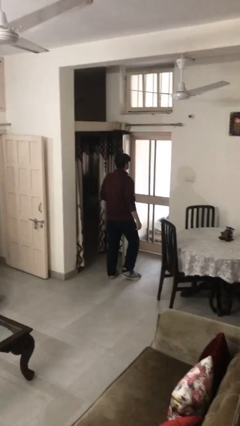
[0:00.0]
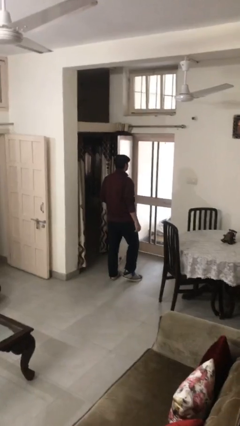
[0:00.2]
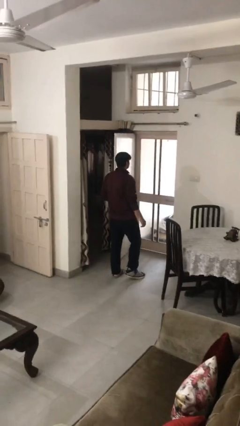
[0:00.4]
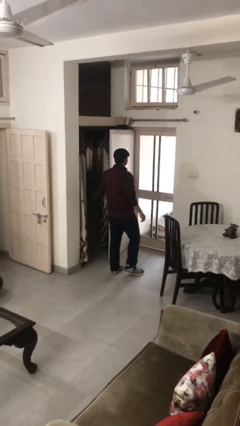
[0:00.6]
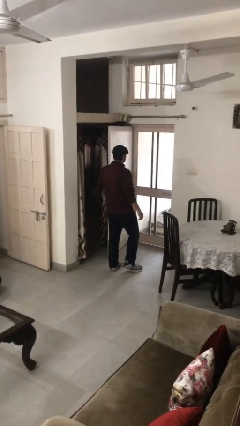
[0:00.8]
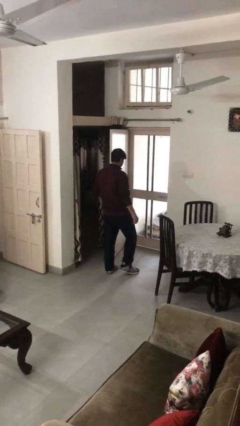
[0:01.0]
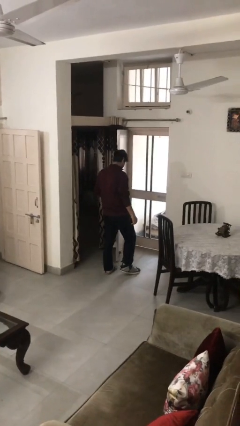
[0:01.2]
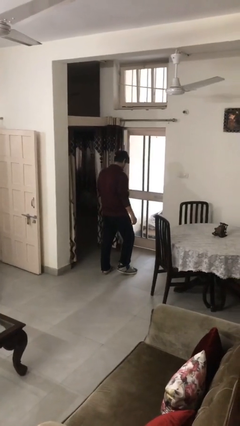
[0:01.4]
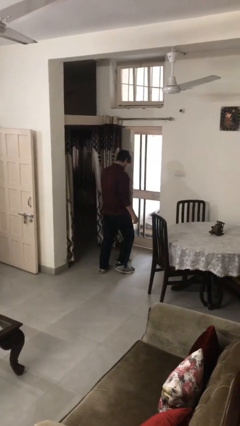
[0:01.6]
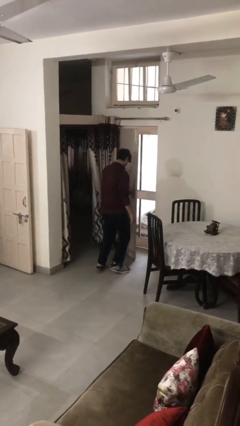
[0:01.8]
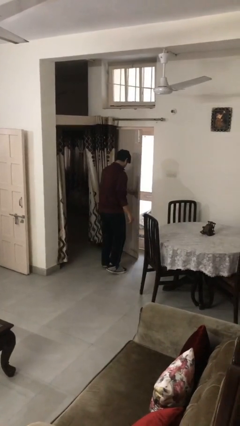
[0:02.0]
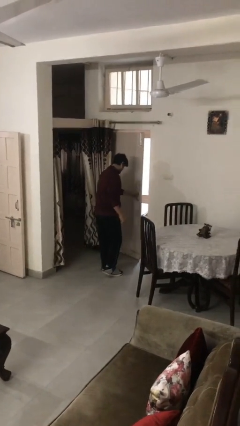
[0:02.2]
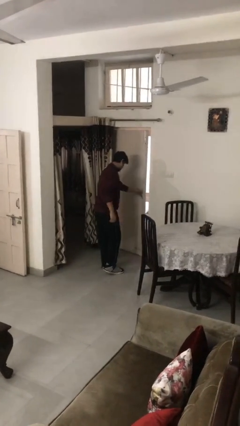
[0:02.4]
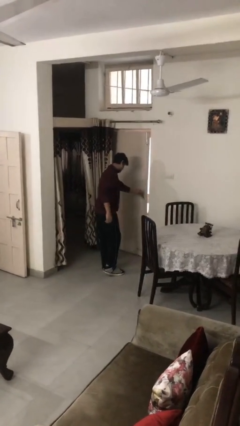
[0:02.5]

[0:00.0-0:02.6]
person closes facility door

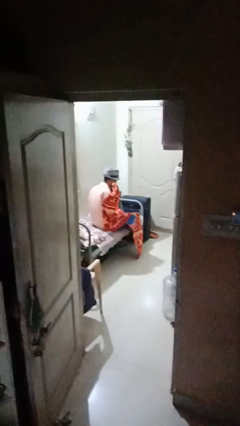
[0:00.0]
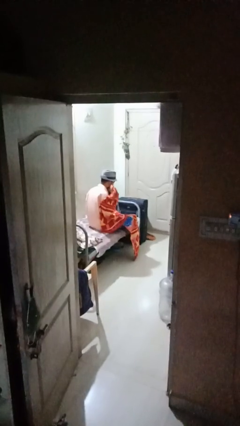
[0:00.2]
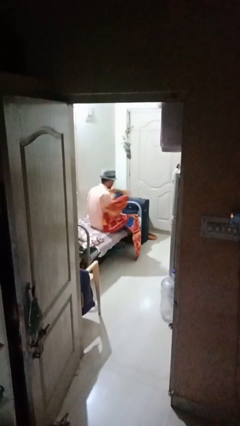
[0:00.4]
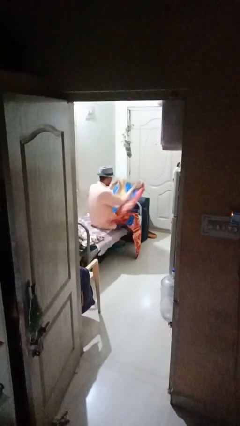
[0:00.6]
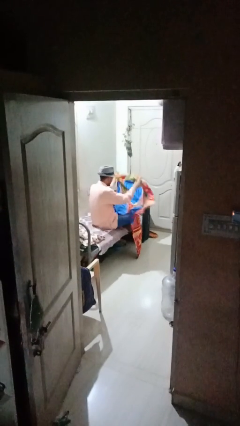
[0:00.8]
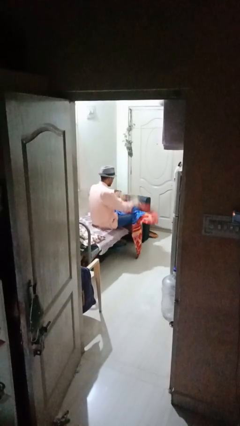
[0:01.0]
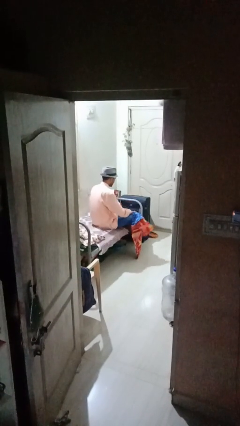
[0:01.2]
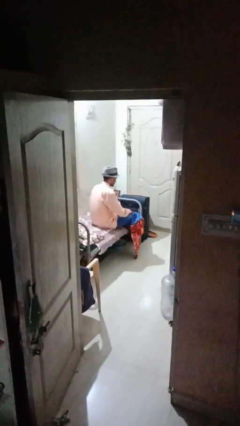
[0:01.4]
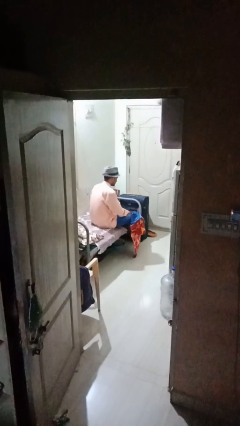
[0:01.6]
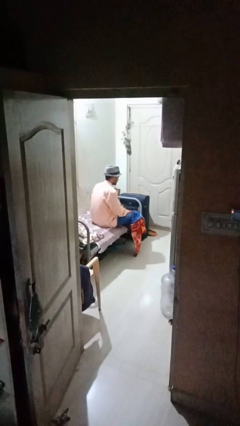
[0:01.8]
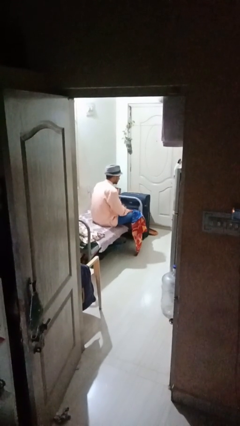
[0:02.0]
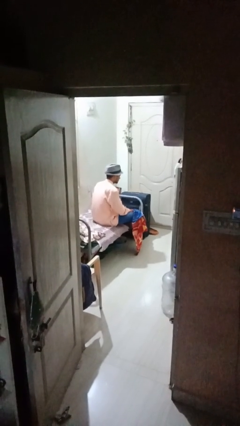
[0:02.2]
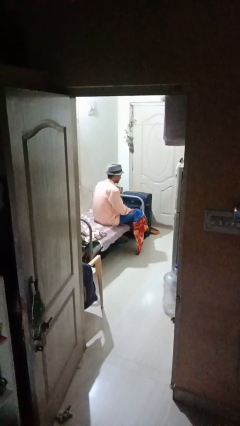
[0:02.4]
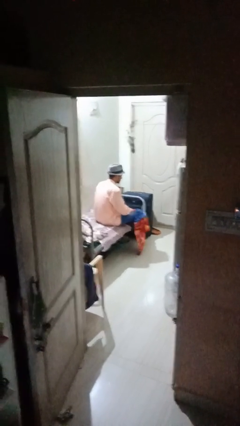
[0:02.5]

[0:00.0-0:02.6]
person uncovers with blanket

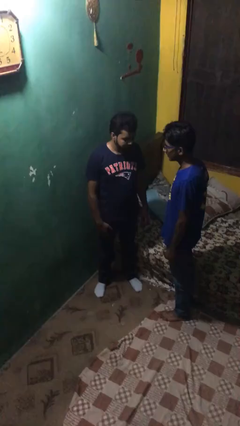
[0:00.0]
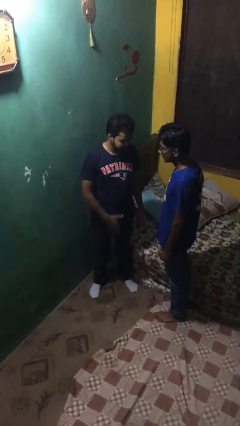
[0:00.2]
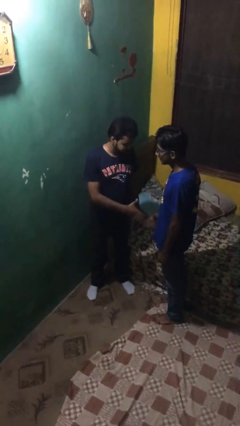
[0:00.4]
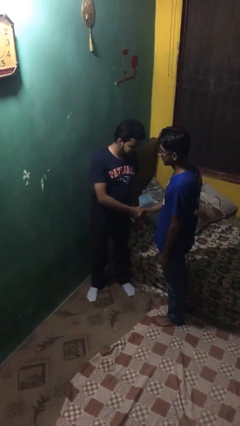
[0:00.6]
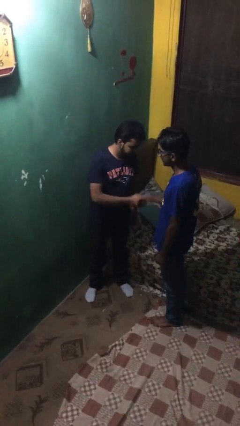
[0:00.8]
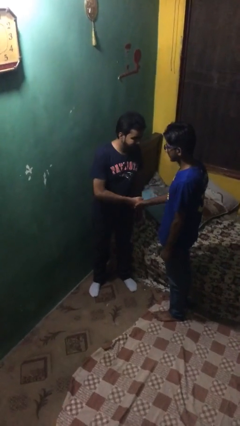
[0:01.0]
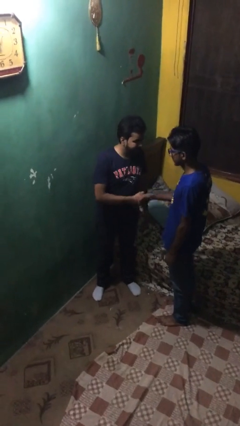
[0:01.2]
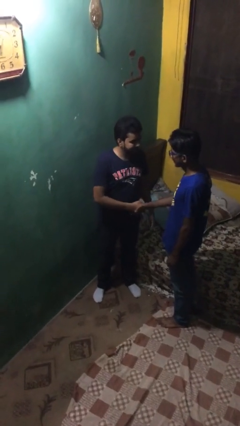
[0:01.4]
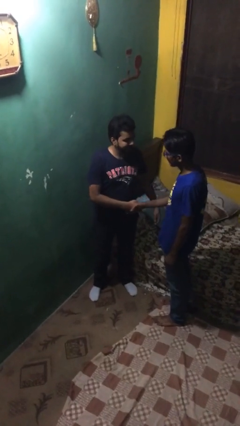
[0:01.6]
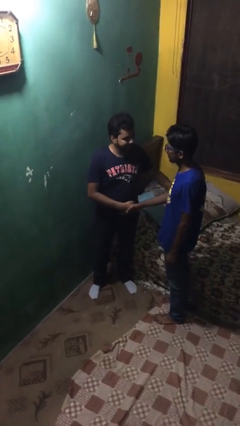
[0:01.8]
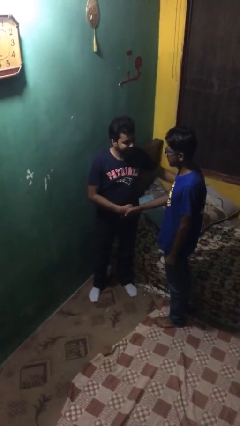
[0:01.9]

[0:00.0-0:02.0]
person shakes hand

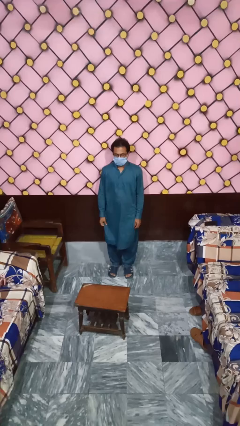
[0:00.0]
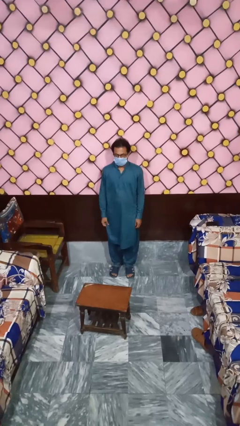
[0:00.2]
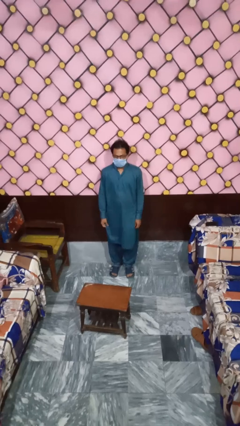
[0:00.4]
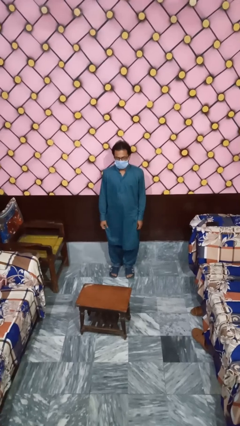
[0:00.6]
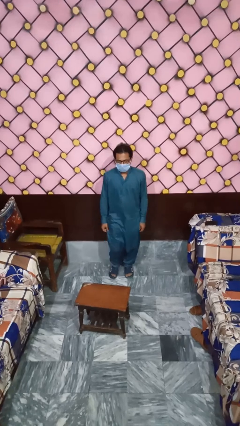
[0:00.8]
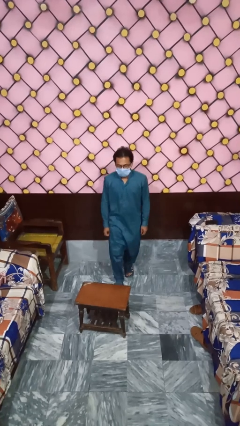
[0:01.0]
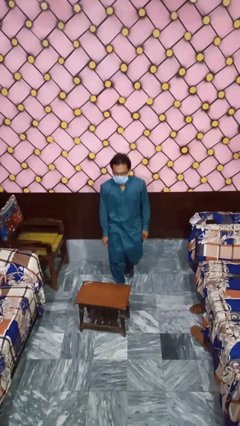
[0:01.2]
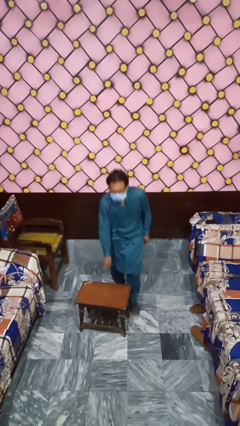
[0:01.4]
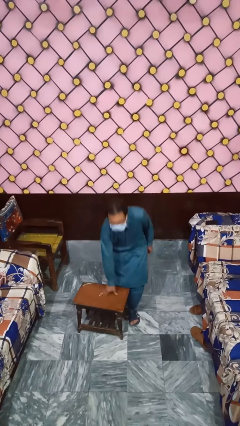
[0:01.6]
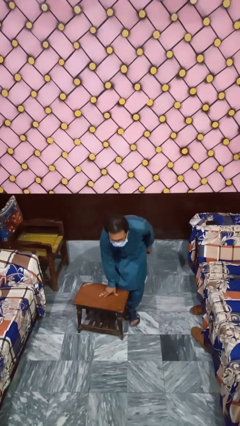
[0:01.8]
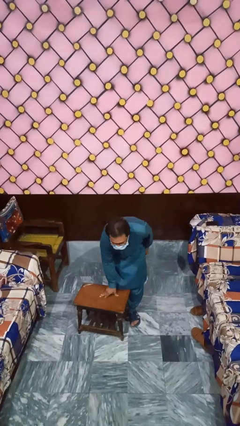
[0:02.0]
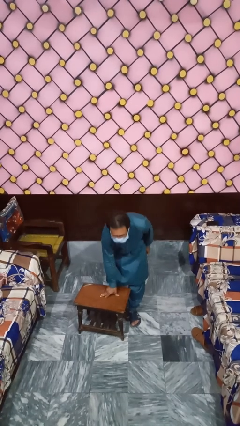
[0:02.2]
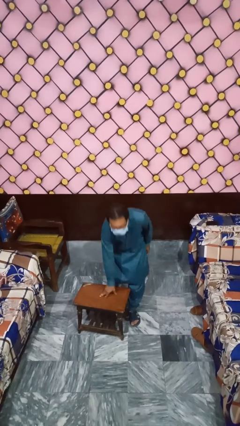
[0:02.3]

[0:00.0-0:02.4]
person bumps into table

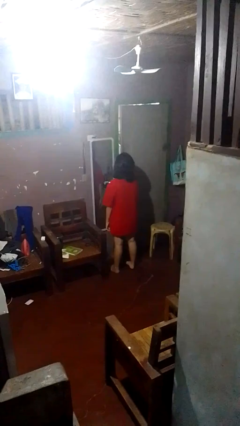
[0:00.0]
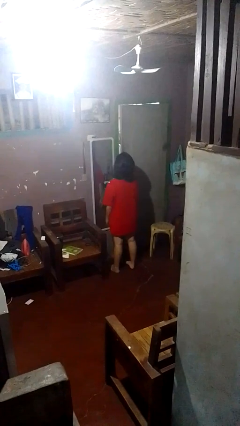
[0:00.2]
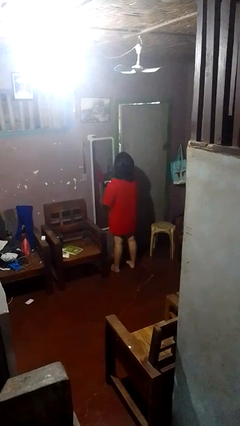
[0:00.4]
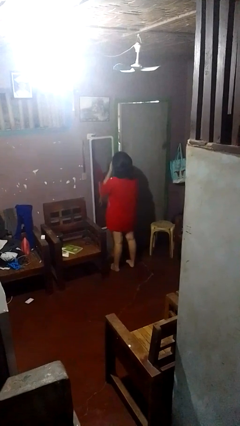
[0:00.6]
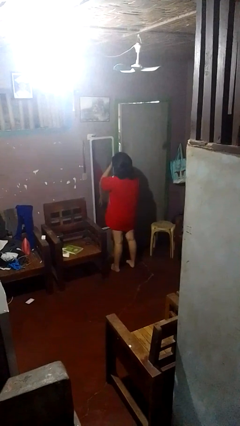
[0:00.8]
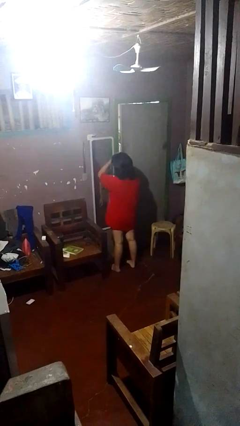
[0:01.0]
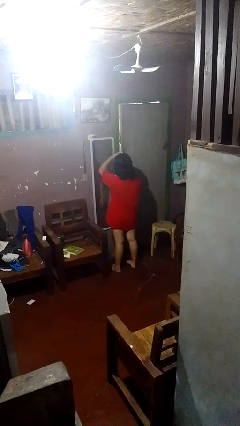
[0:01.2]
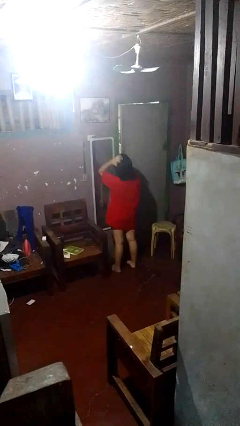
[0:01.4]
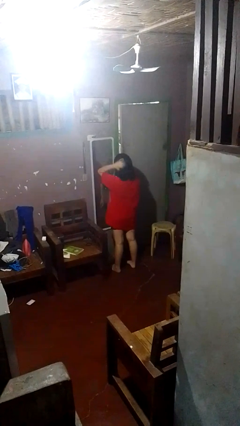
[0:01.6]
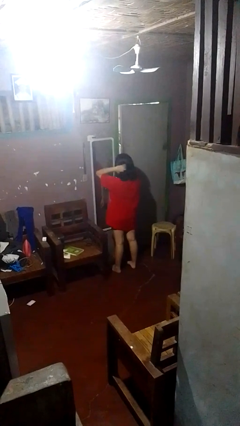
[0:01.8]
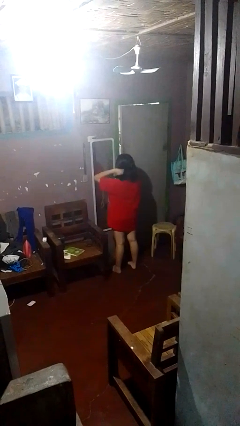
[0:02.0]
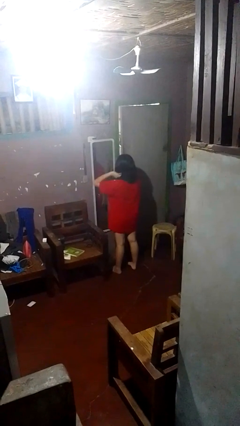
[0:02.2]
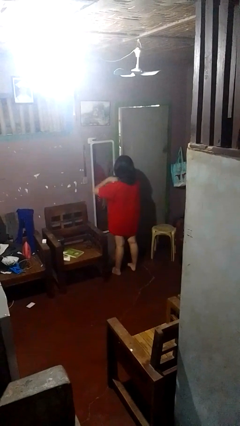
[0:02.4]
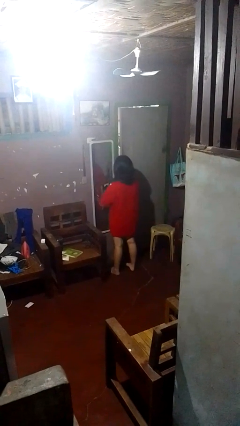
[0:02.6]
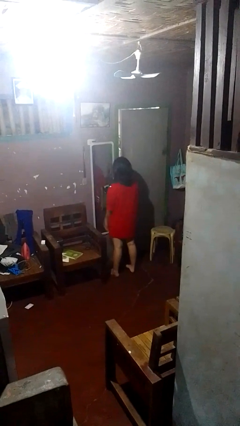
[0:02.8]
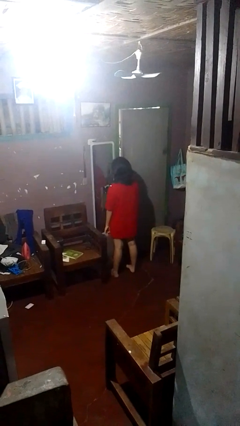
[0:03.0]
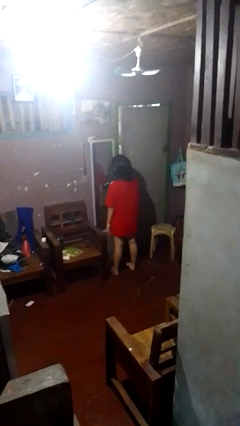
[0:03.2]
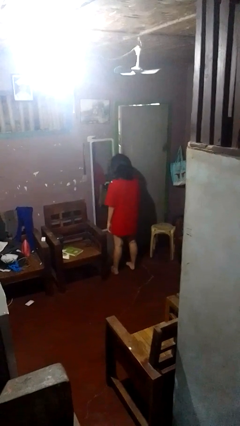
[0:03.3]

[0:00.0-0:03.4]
person strokes hair

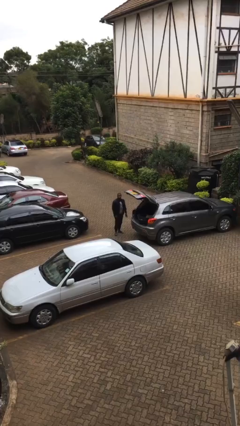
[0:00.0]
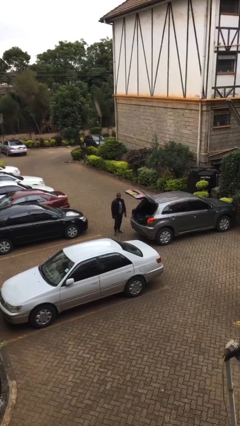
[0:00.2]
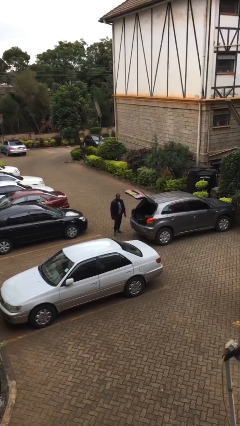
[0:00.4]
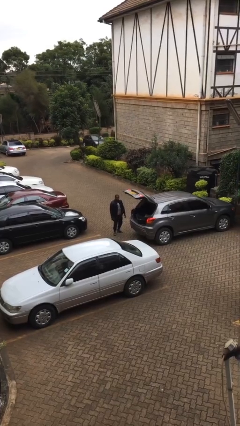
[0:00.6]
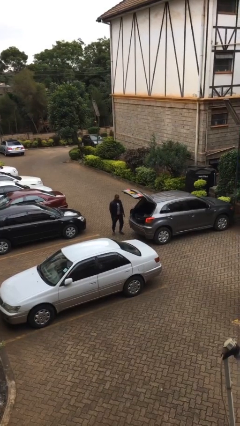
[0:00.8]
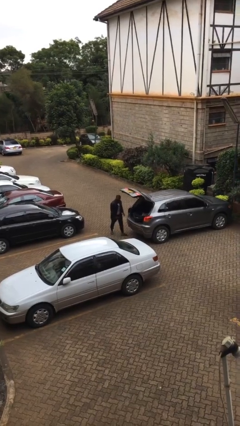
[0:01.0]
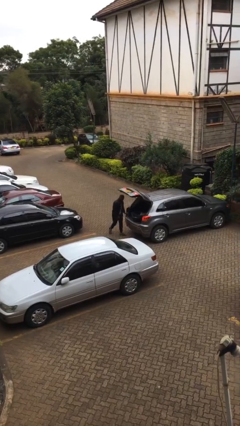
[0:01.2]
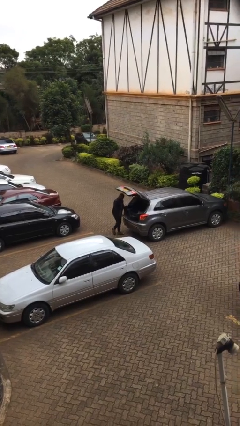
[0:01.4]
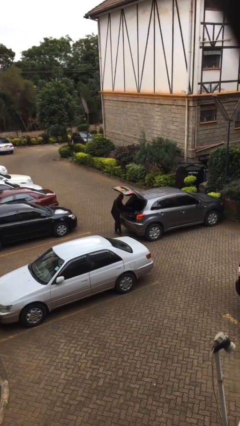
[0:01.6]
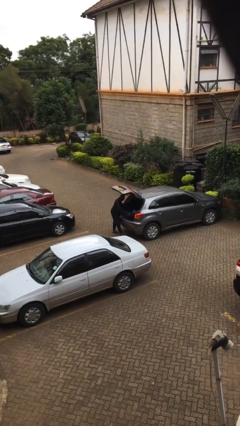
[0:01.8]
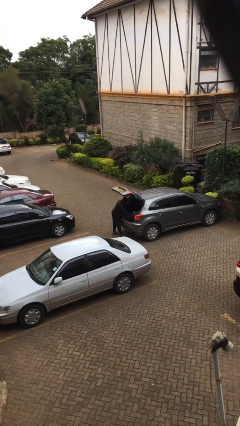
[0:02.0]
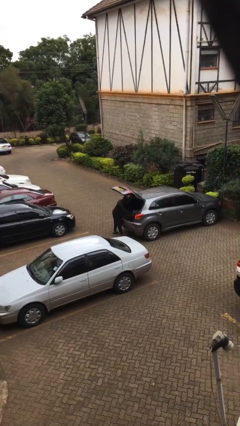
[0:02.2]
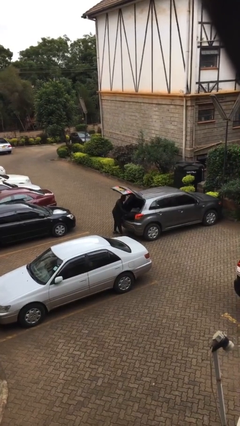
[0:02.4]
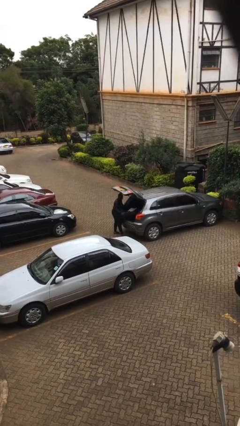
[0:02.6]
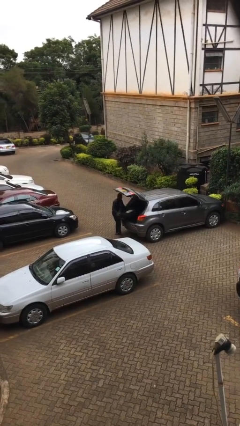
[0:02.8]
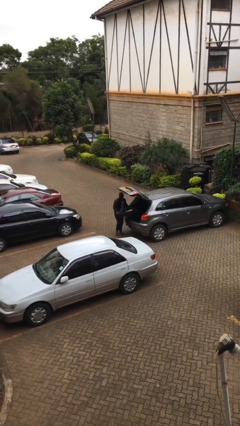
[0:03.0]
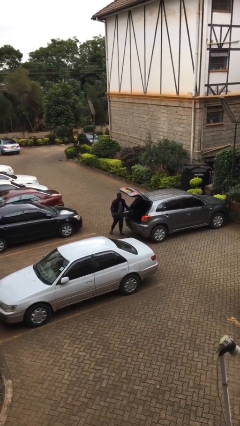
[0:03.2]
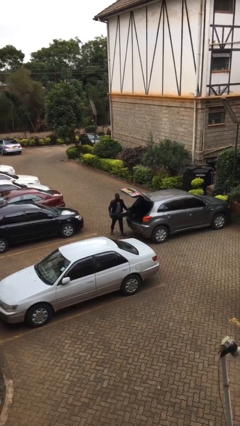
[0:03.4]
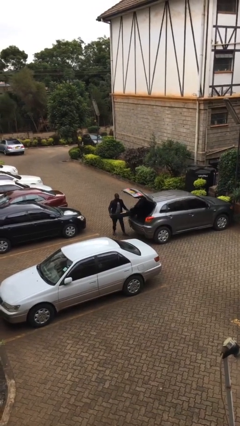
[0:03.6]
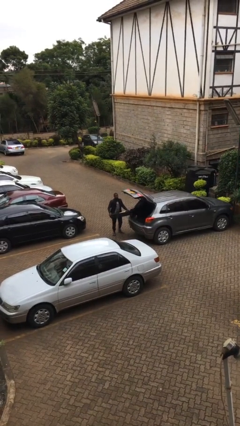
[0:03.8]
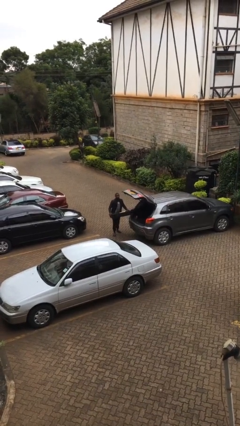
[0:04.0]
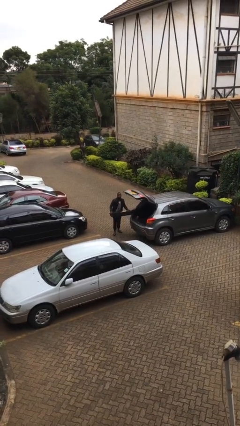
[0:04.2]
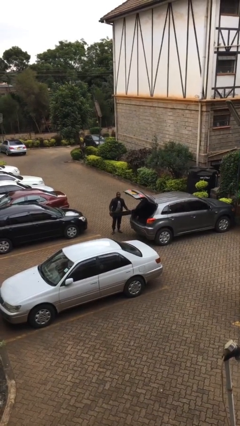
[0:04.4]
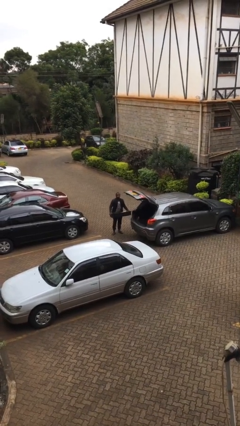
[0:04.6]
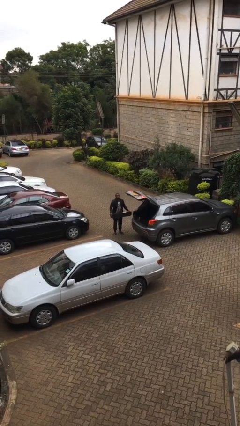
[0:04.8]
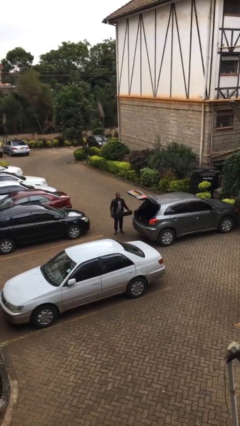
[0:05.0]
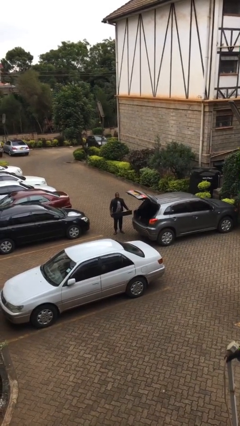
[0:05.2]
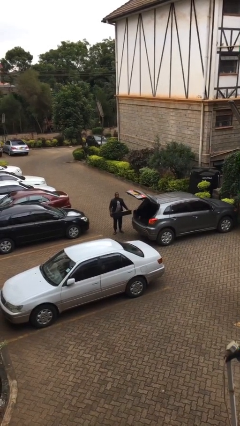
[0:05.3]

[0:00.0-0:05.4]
person unloads car
